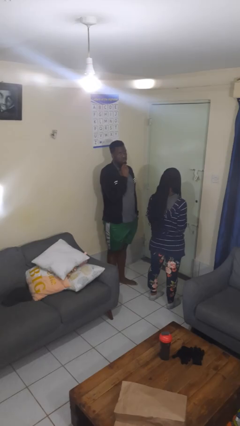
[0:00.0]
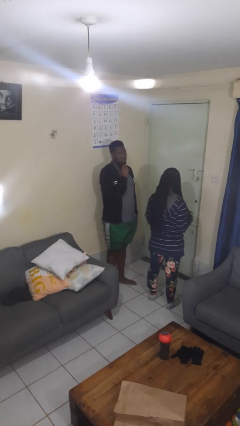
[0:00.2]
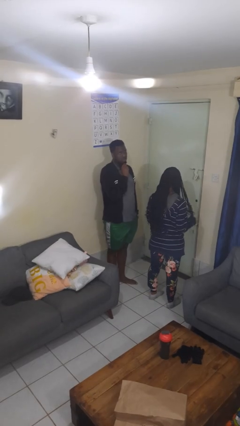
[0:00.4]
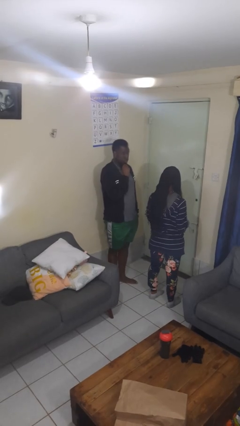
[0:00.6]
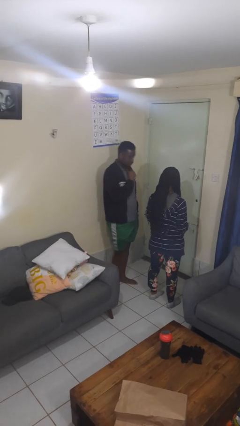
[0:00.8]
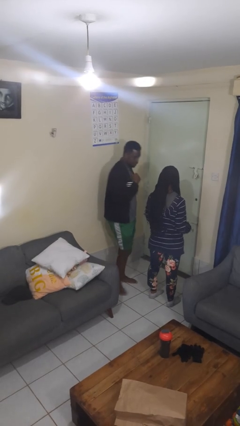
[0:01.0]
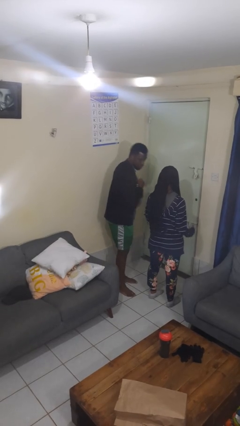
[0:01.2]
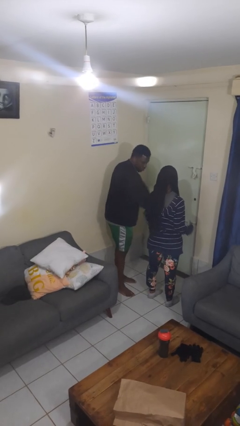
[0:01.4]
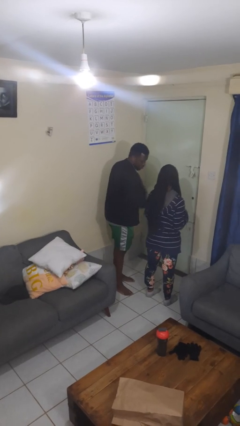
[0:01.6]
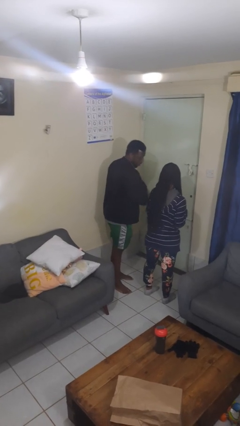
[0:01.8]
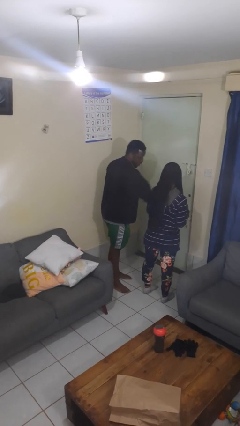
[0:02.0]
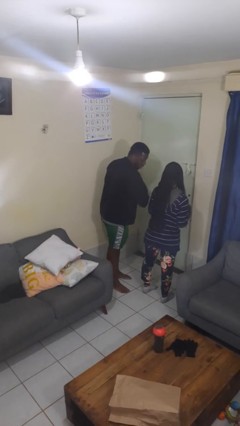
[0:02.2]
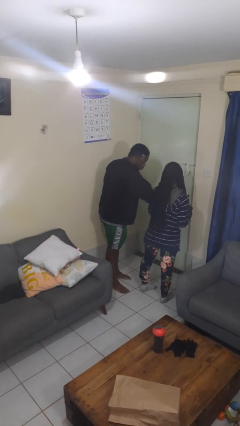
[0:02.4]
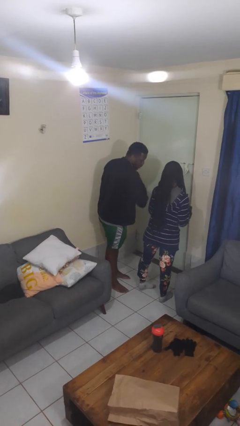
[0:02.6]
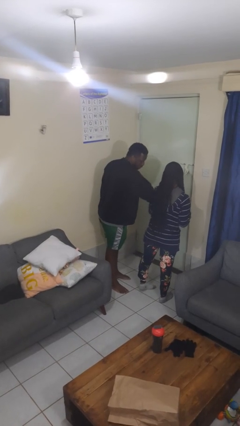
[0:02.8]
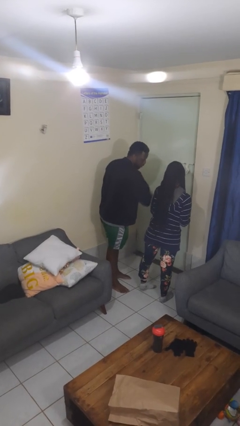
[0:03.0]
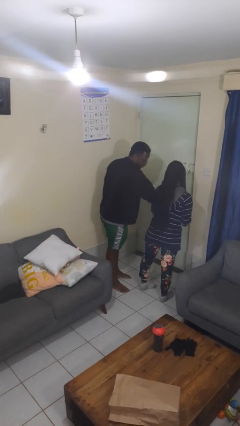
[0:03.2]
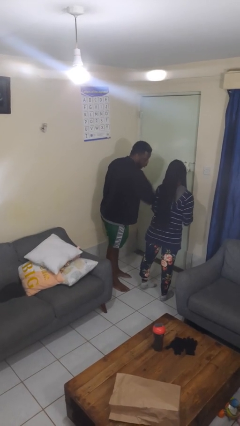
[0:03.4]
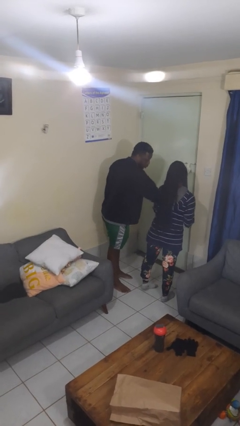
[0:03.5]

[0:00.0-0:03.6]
person nudges person with elbow

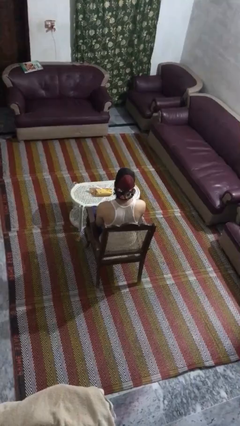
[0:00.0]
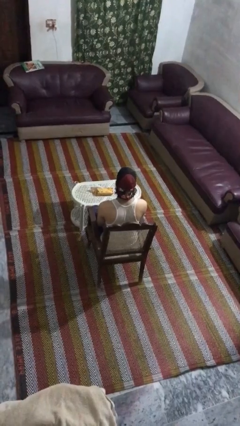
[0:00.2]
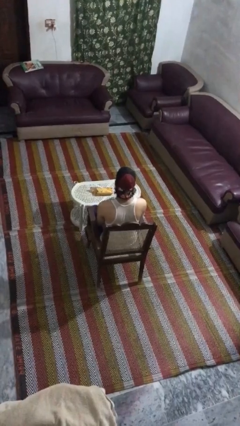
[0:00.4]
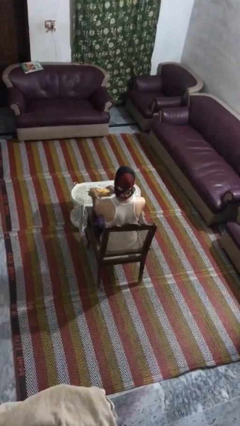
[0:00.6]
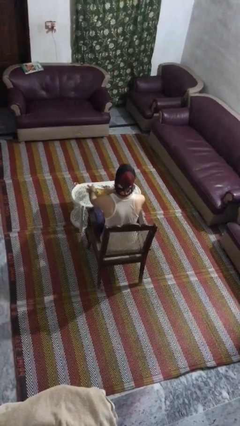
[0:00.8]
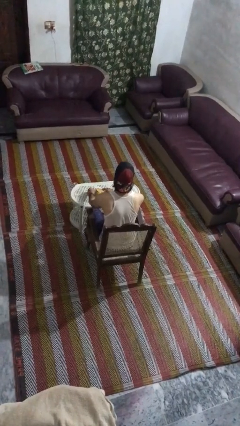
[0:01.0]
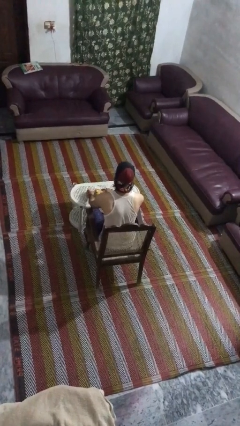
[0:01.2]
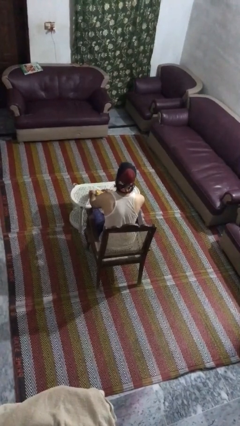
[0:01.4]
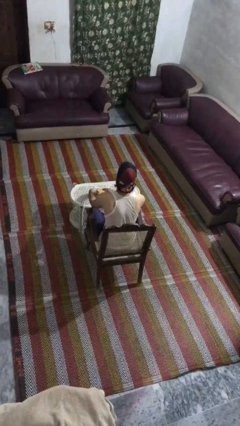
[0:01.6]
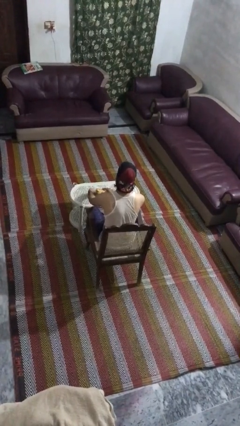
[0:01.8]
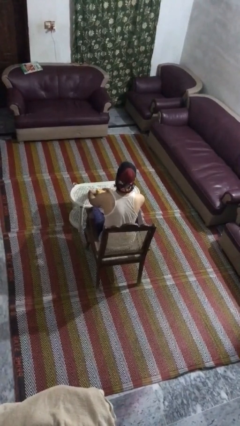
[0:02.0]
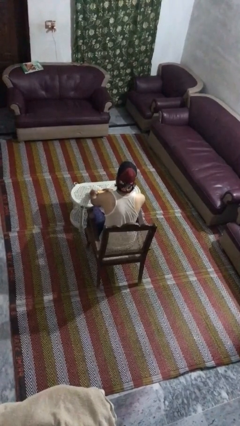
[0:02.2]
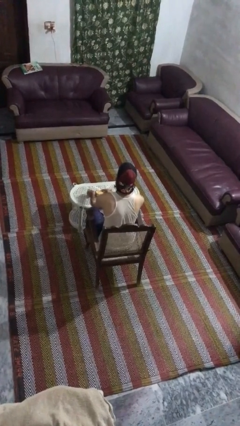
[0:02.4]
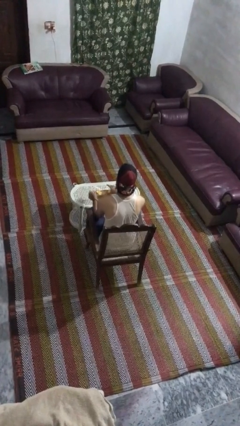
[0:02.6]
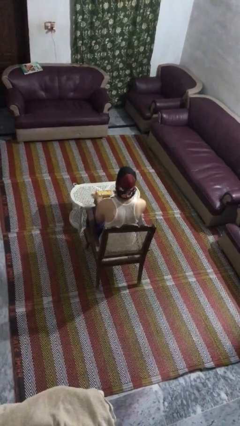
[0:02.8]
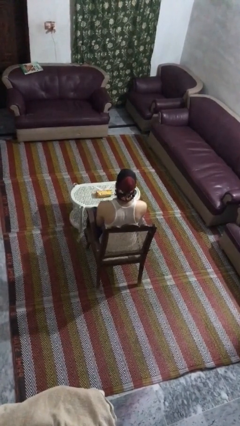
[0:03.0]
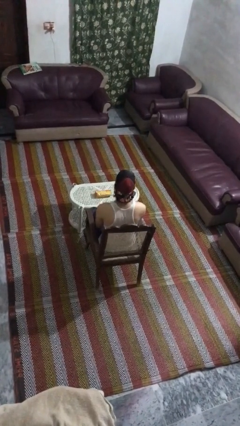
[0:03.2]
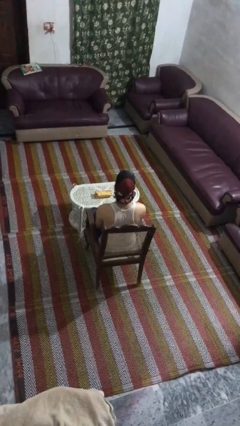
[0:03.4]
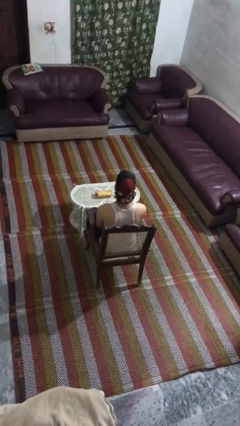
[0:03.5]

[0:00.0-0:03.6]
person wraps box

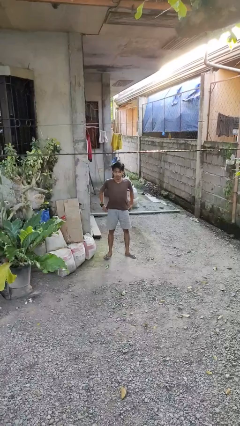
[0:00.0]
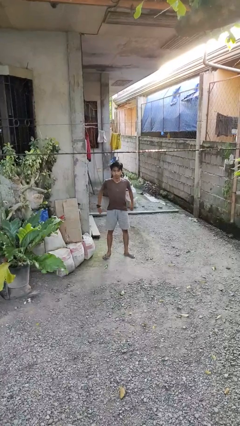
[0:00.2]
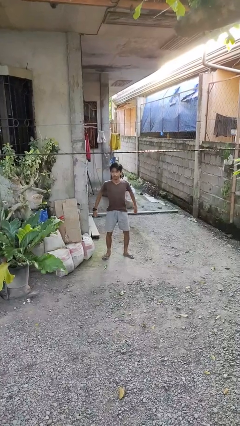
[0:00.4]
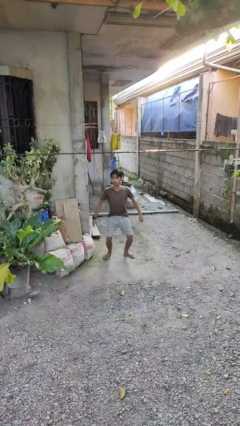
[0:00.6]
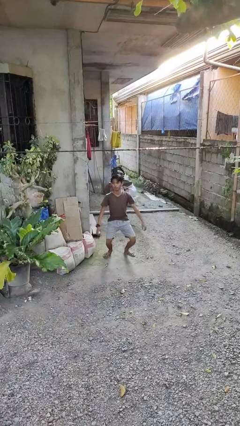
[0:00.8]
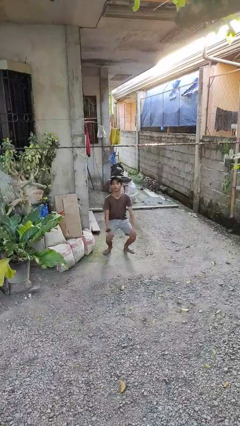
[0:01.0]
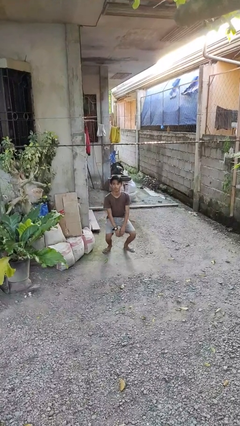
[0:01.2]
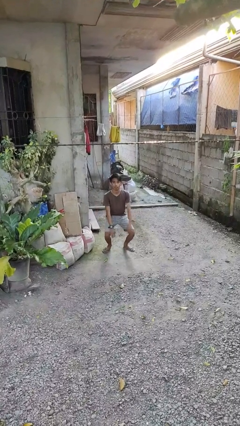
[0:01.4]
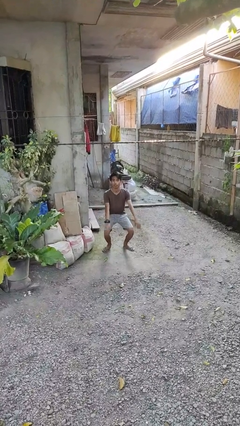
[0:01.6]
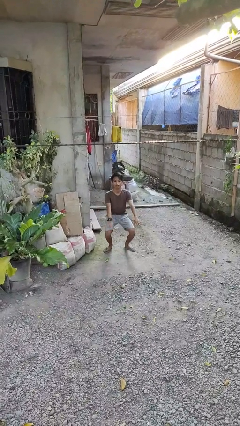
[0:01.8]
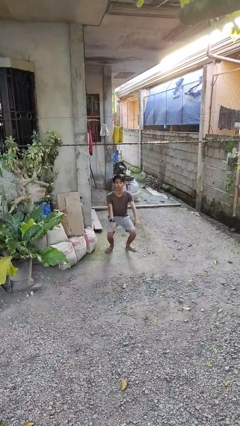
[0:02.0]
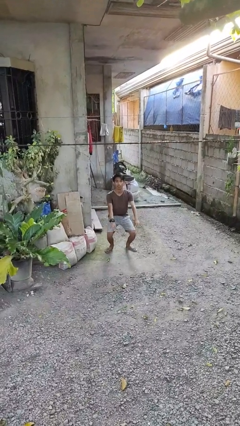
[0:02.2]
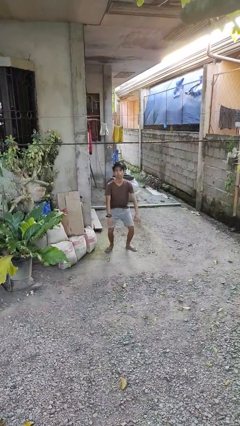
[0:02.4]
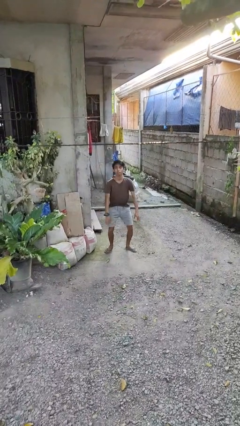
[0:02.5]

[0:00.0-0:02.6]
person squats

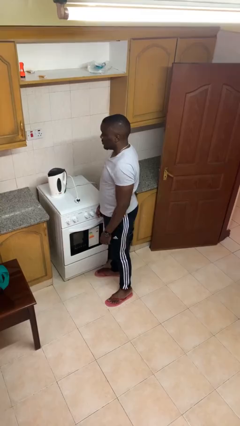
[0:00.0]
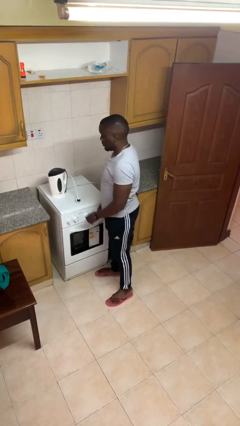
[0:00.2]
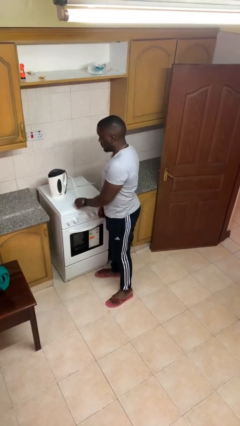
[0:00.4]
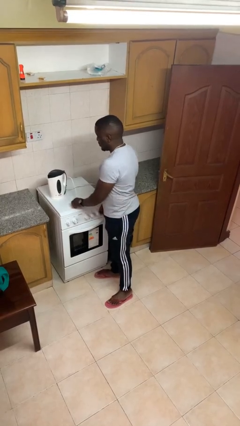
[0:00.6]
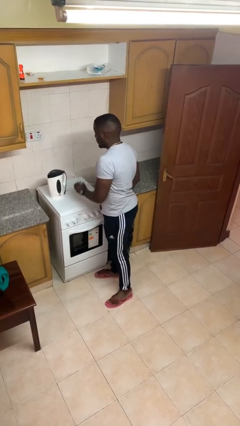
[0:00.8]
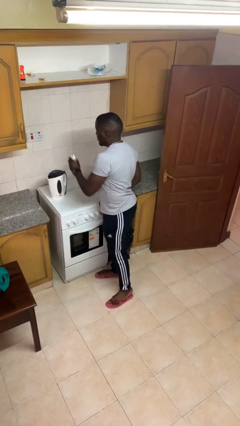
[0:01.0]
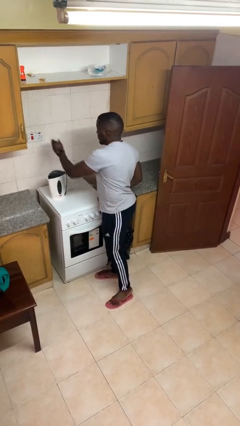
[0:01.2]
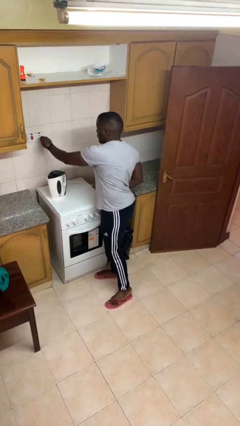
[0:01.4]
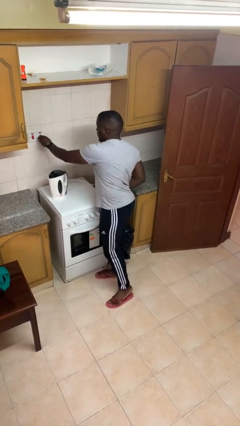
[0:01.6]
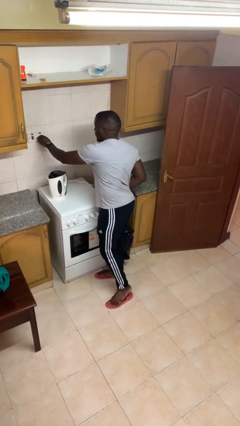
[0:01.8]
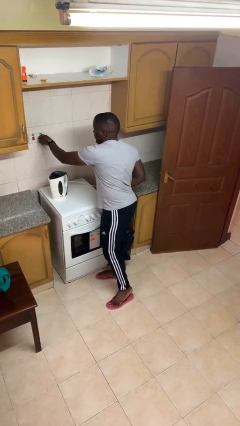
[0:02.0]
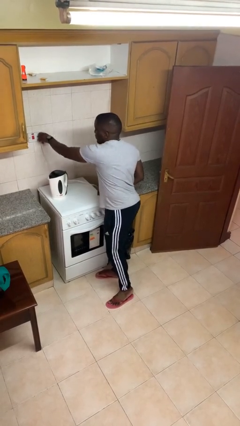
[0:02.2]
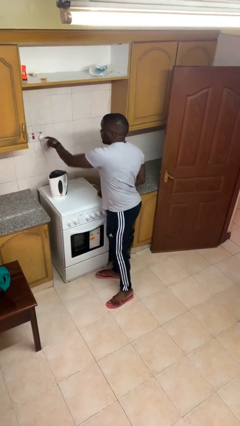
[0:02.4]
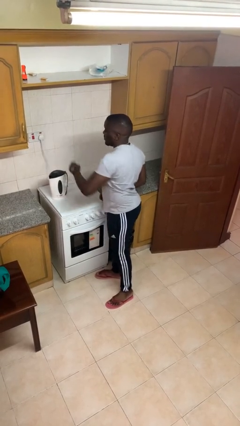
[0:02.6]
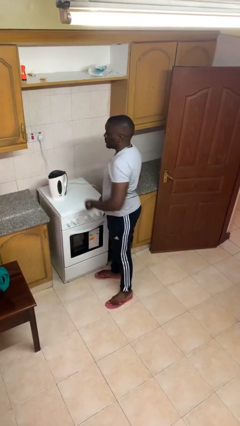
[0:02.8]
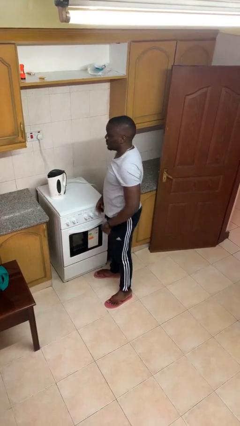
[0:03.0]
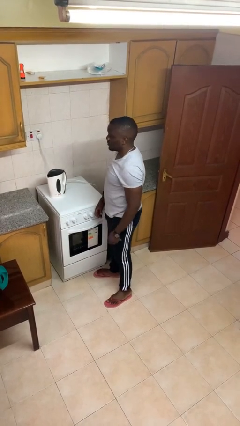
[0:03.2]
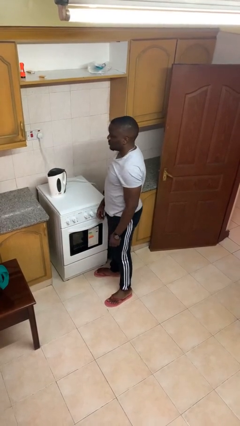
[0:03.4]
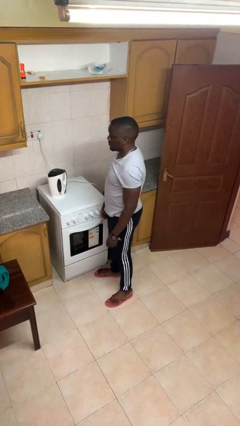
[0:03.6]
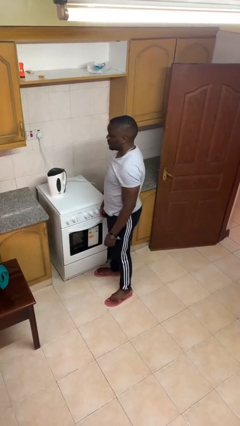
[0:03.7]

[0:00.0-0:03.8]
person plugs into electrical socket

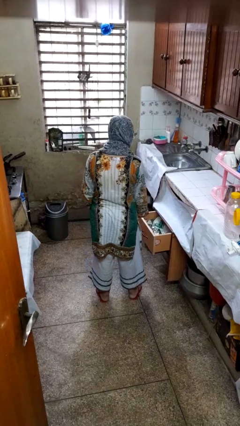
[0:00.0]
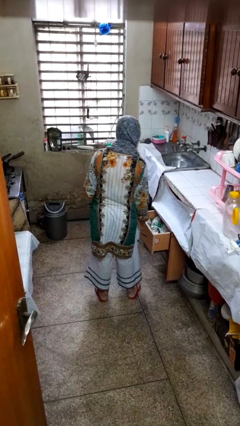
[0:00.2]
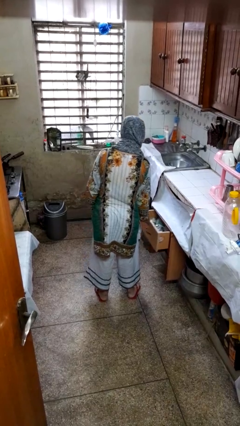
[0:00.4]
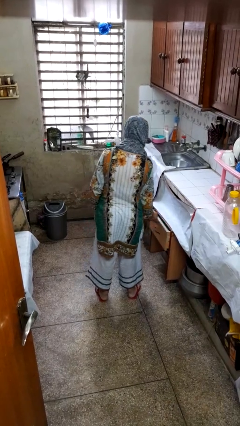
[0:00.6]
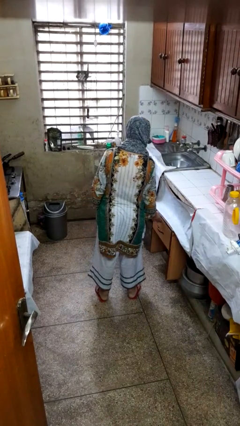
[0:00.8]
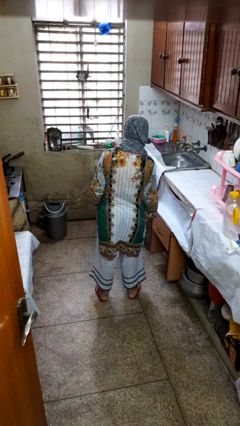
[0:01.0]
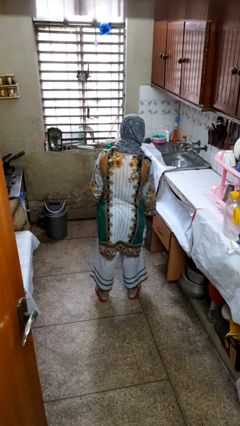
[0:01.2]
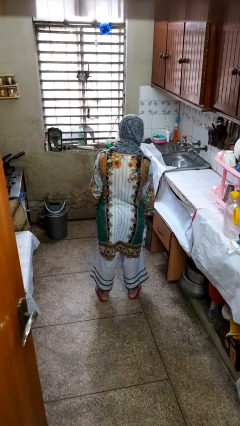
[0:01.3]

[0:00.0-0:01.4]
person closes kitchen drawer

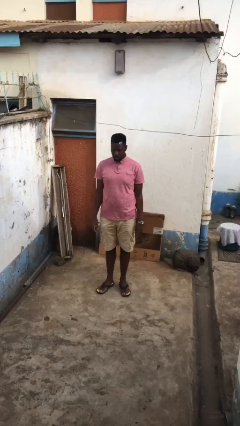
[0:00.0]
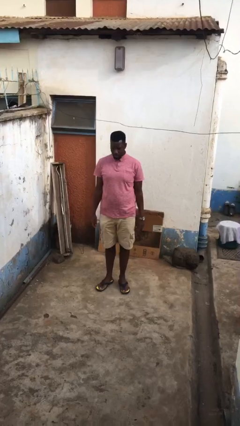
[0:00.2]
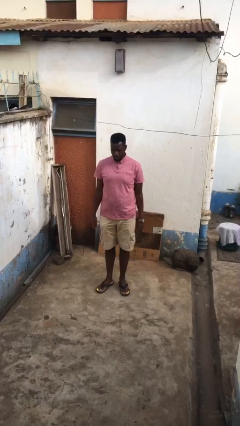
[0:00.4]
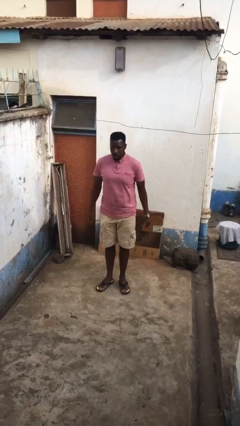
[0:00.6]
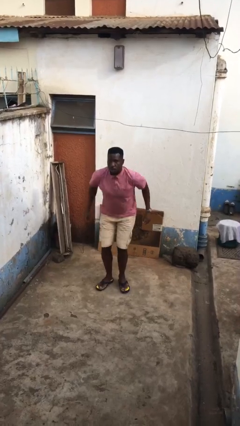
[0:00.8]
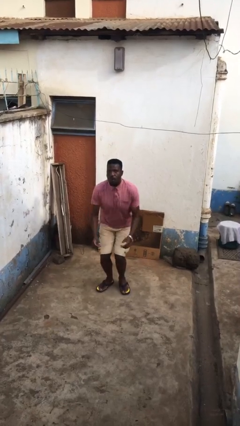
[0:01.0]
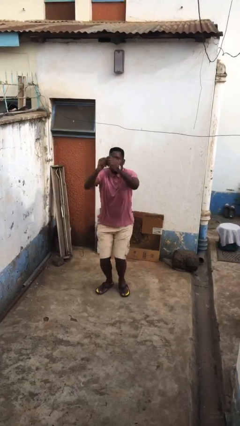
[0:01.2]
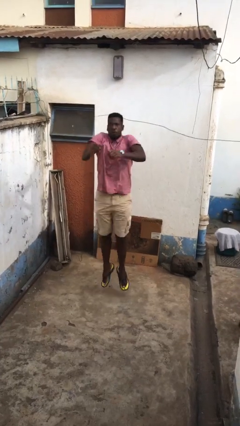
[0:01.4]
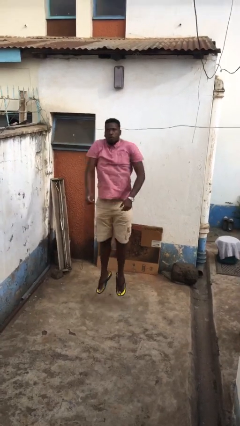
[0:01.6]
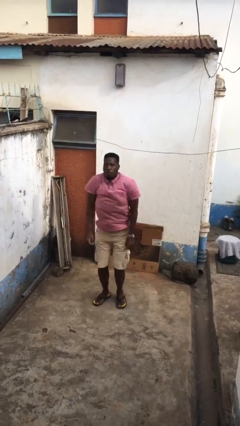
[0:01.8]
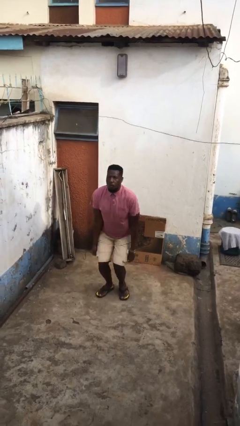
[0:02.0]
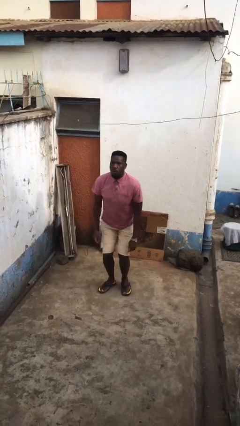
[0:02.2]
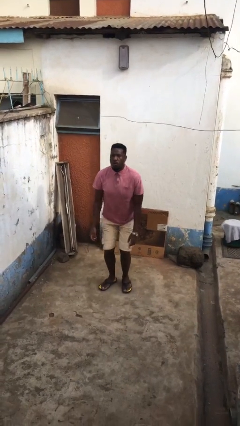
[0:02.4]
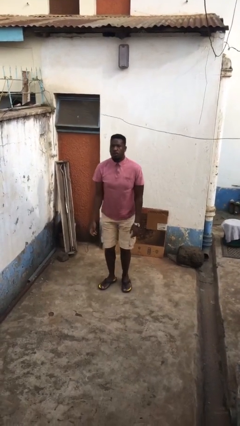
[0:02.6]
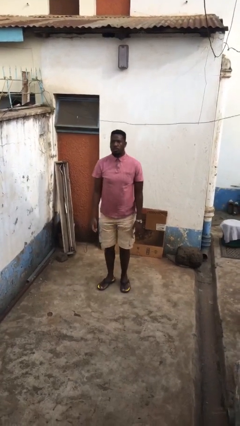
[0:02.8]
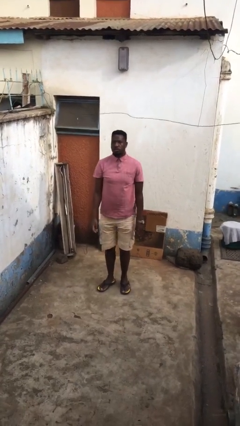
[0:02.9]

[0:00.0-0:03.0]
person jumps
